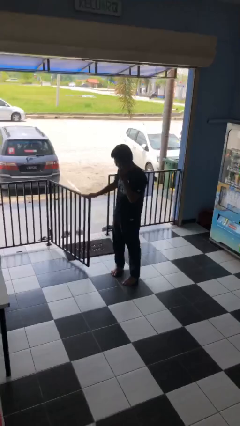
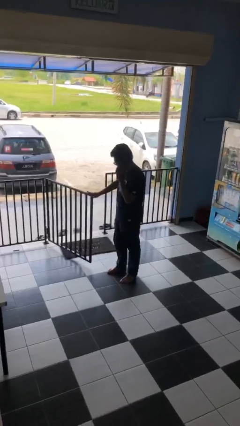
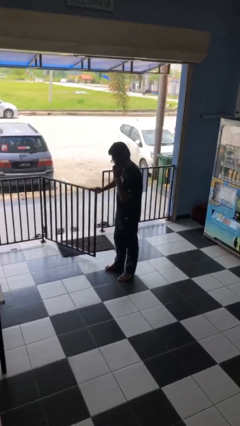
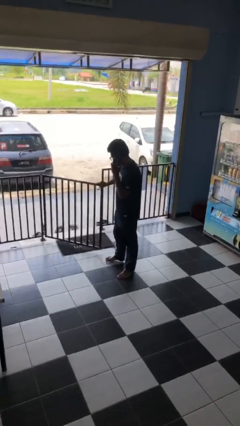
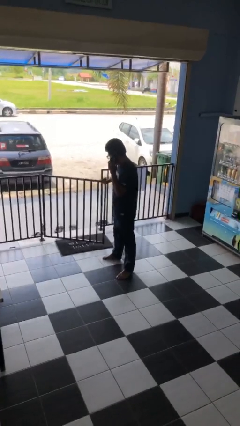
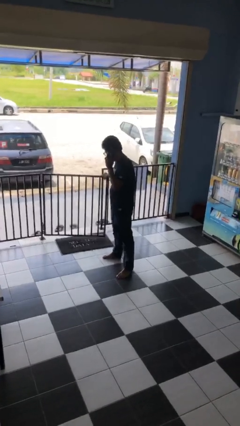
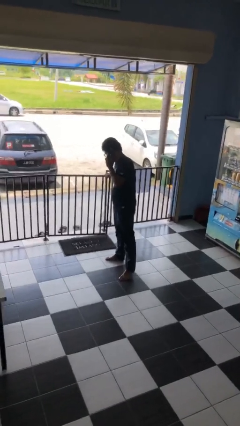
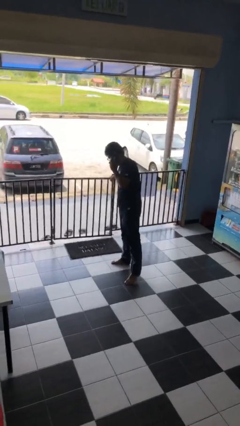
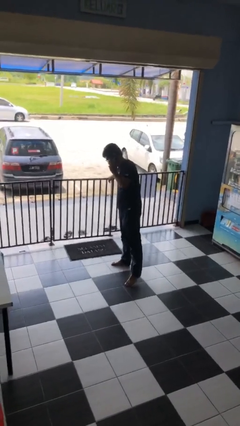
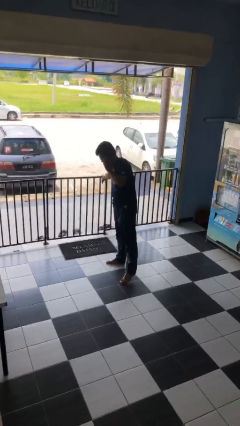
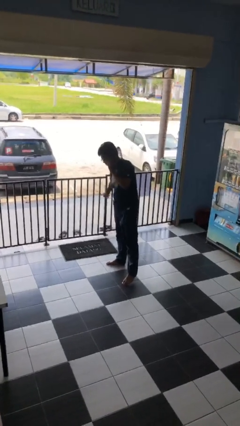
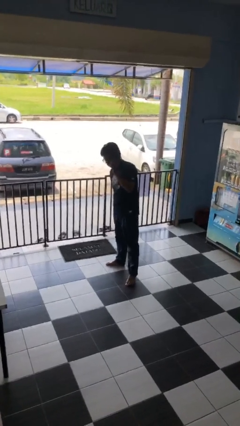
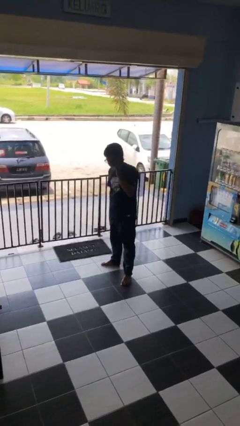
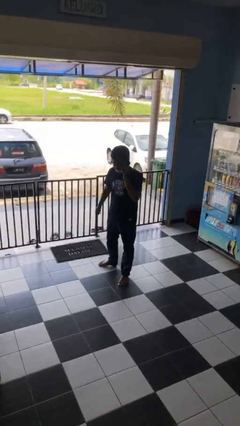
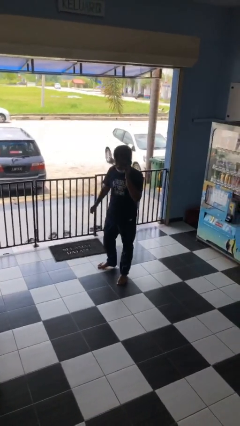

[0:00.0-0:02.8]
person closes facility door

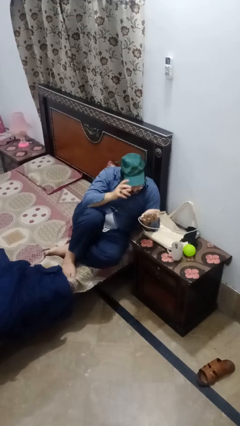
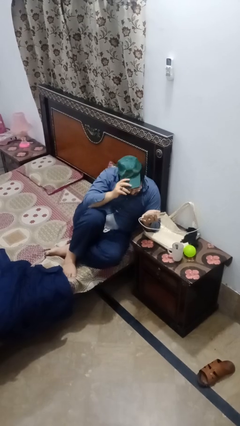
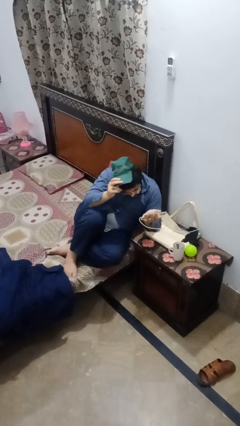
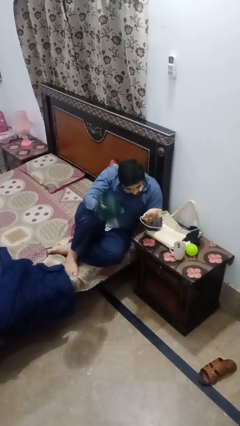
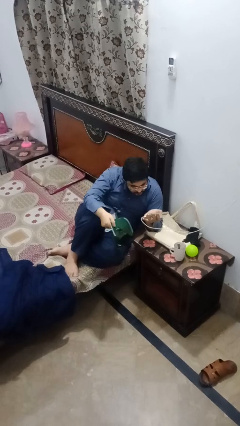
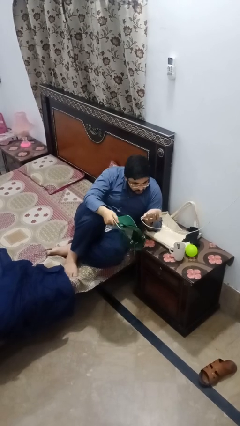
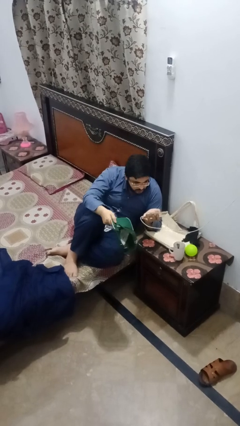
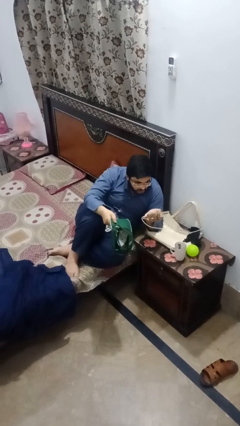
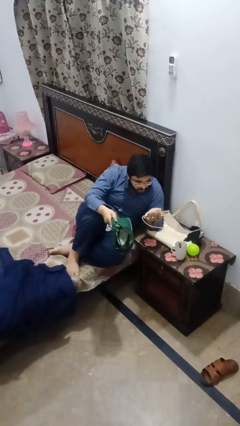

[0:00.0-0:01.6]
person takes off hat

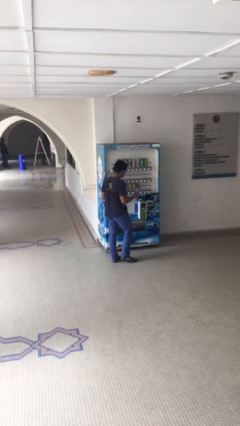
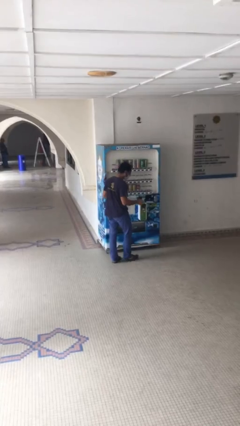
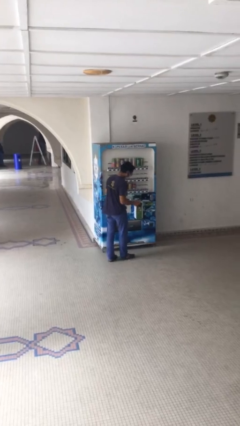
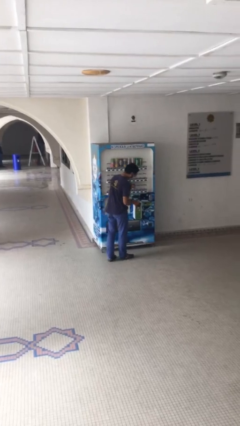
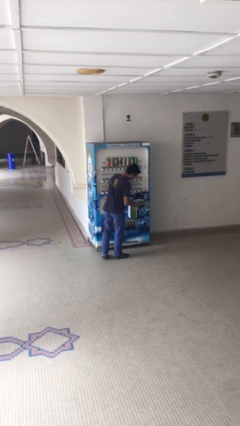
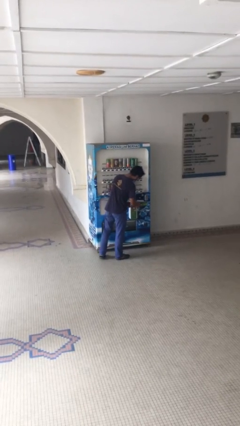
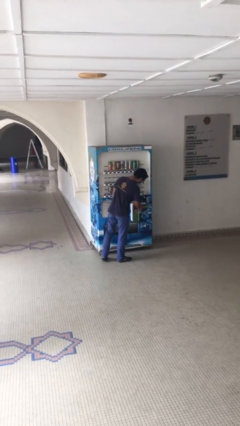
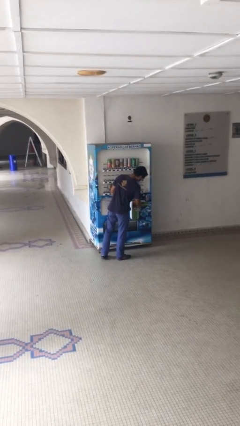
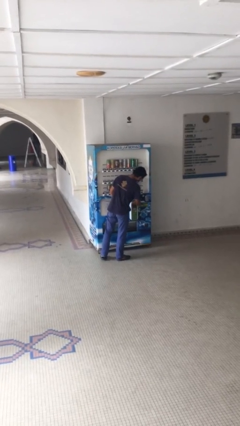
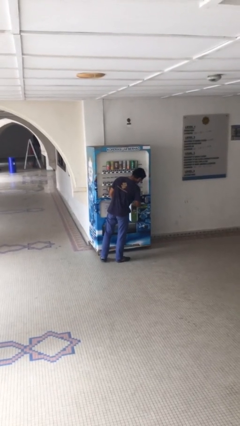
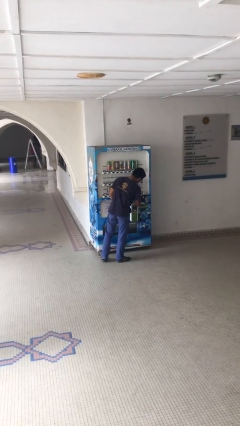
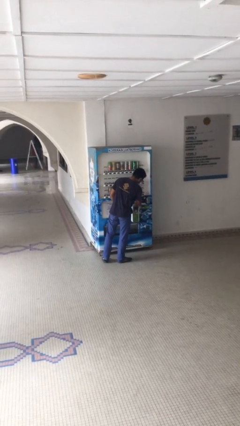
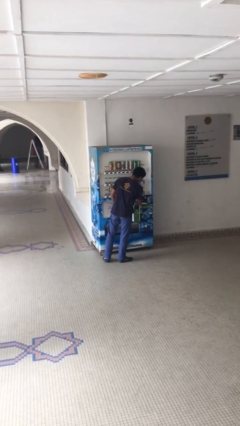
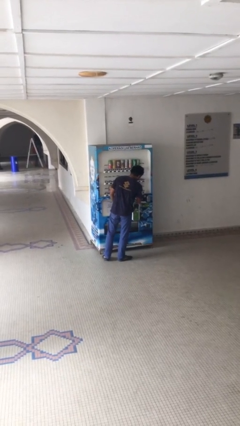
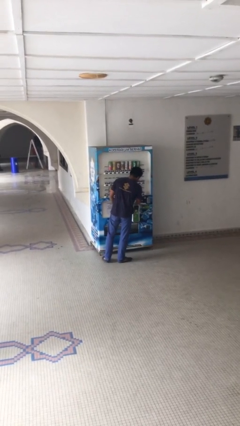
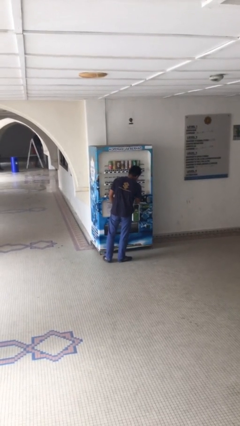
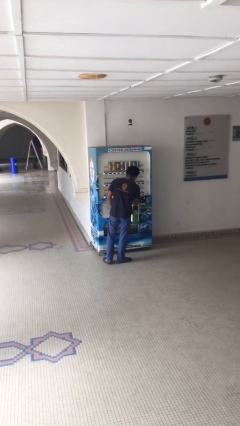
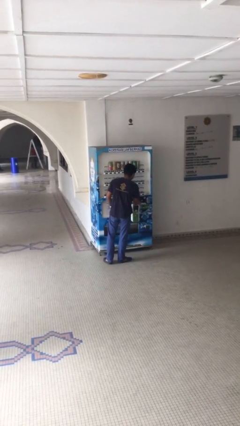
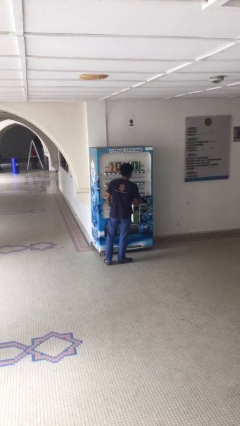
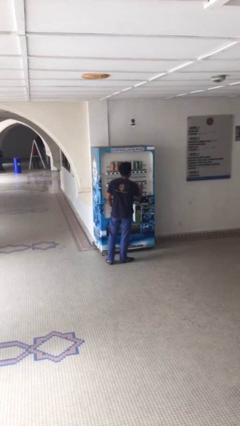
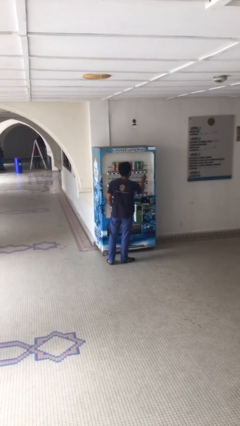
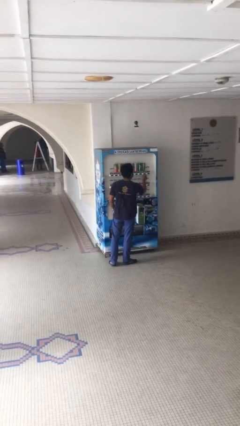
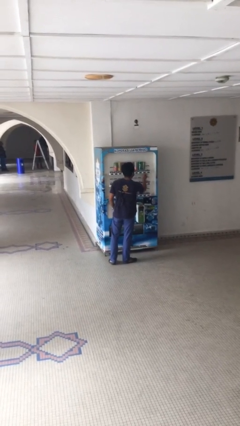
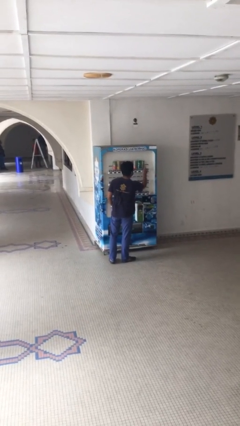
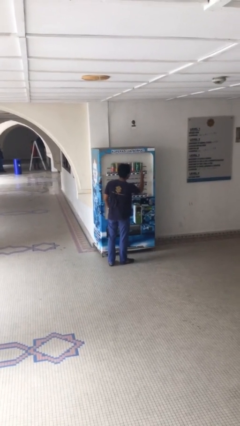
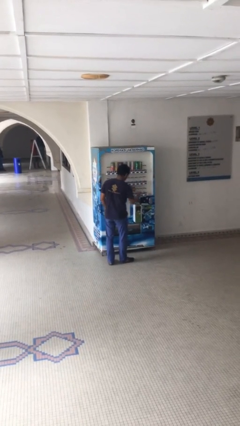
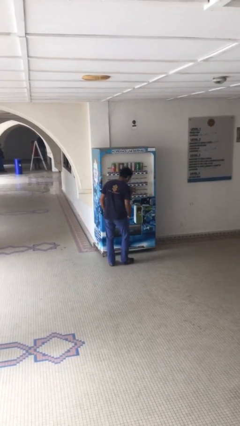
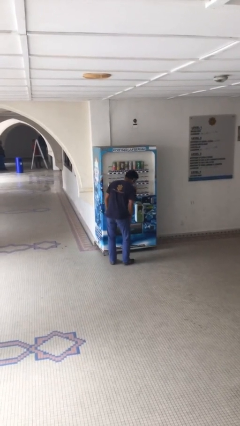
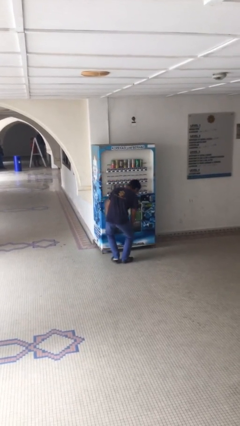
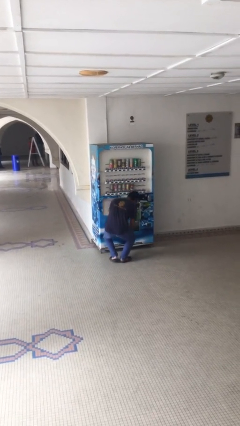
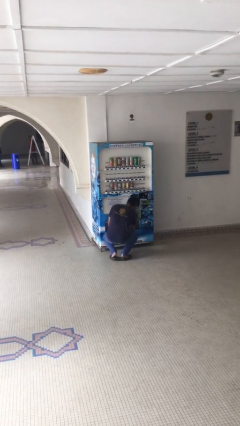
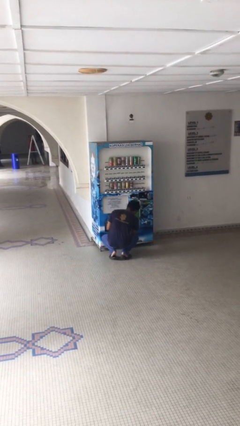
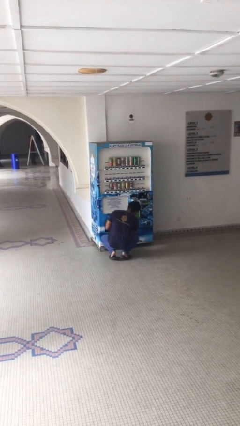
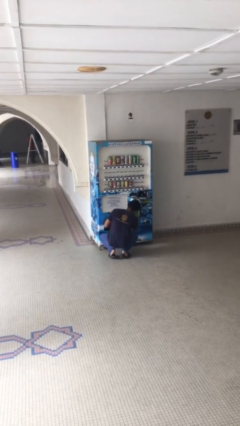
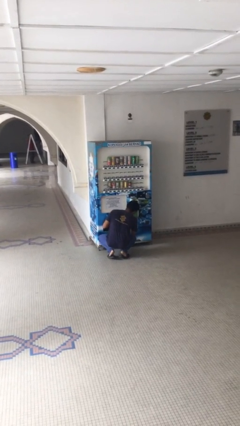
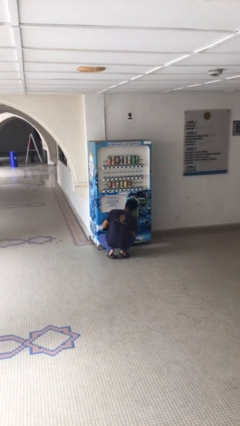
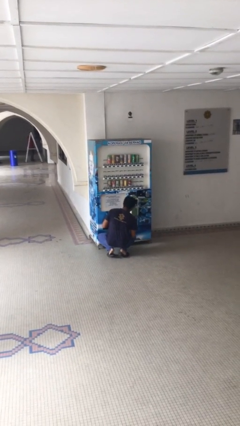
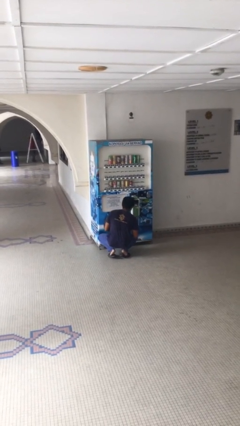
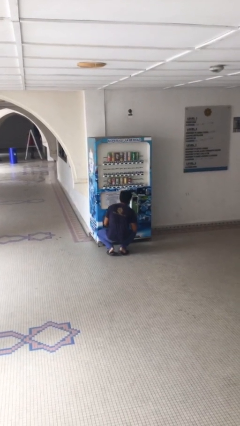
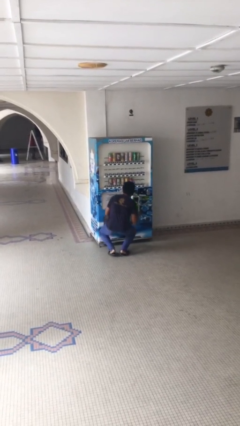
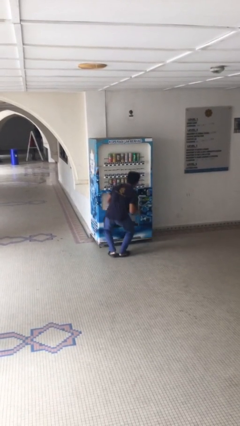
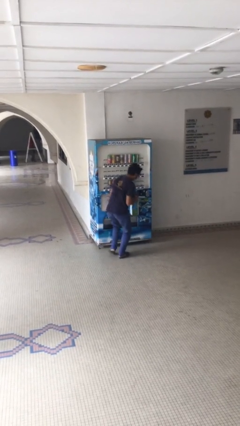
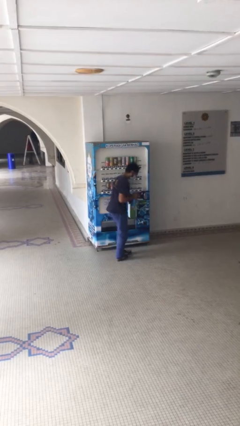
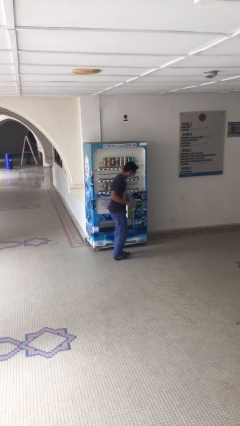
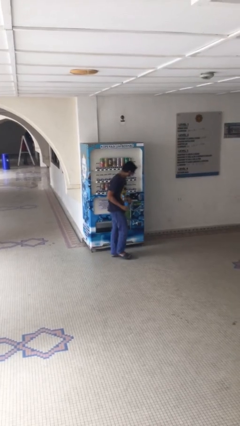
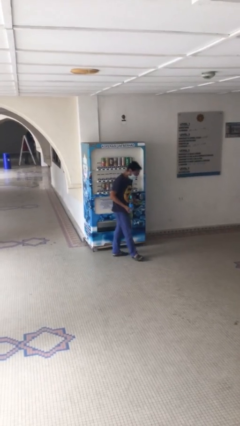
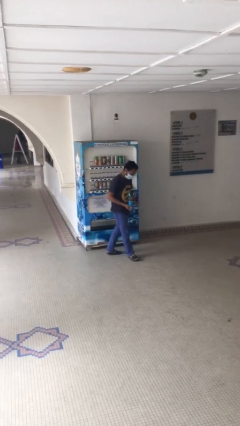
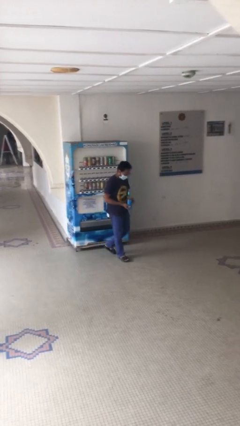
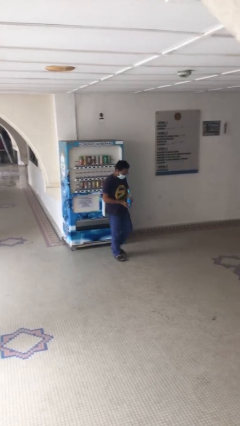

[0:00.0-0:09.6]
person purchases from machine

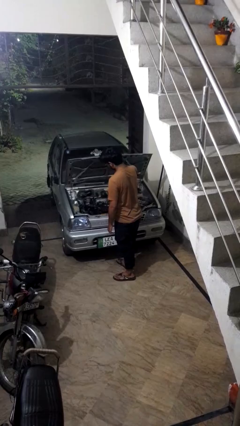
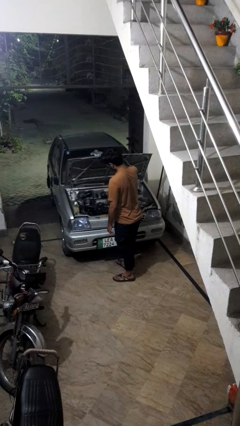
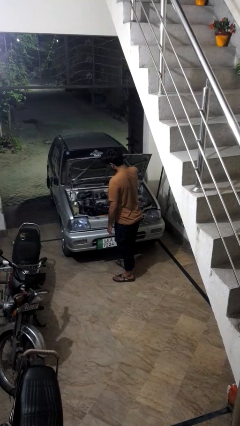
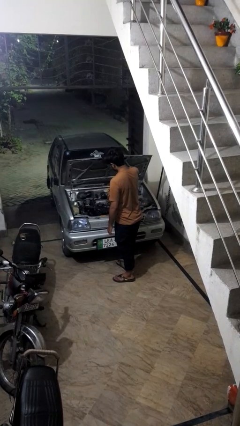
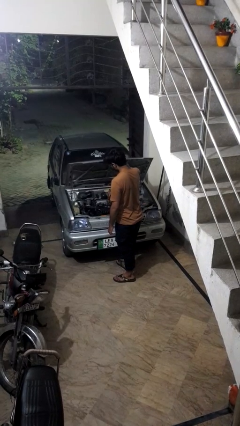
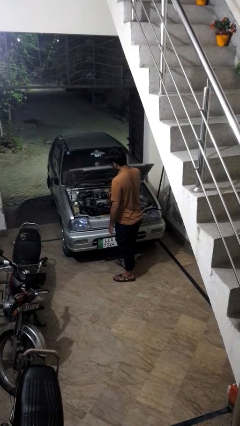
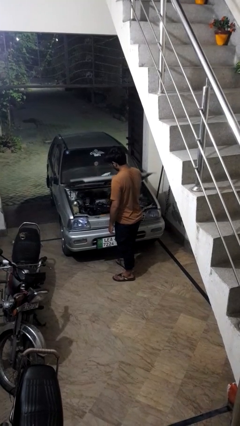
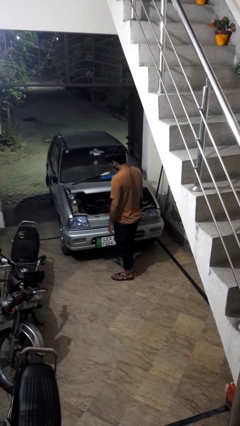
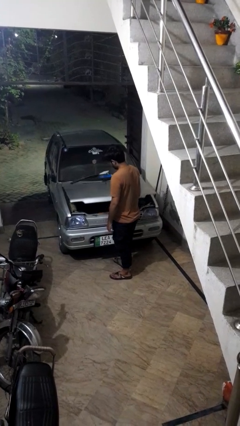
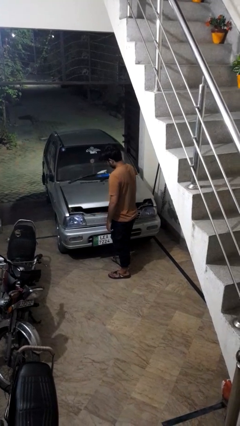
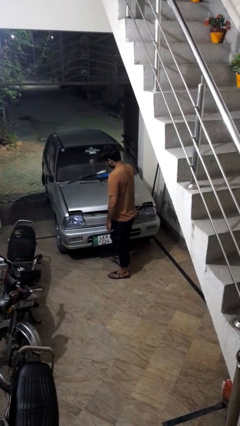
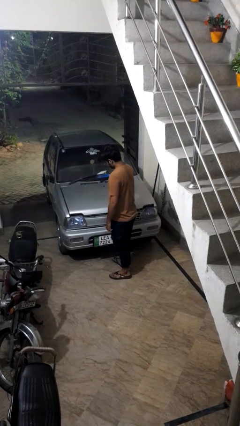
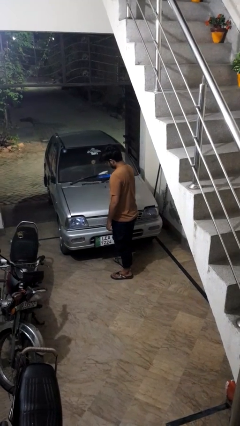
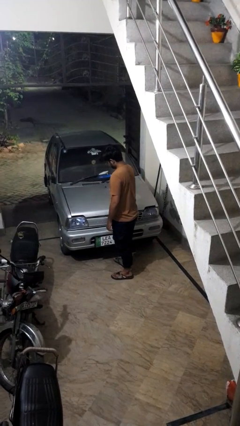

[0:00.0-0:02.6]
person closes car hood

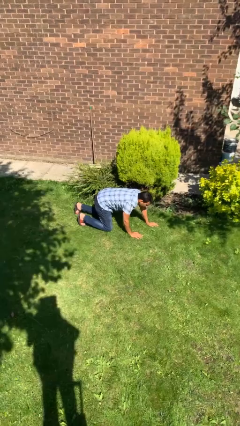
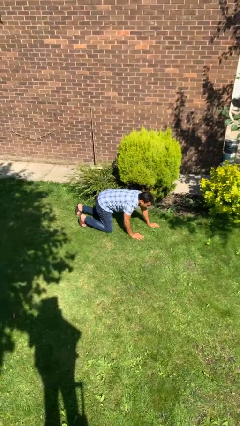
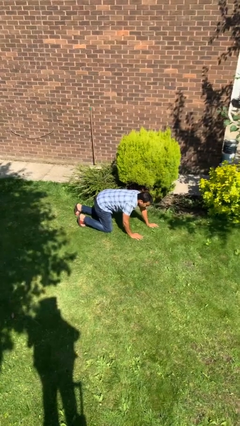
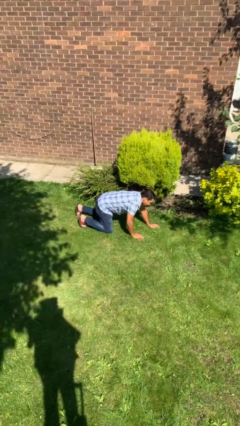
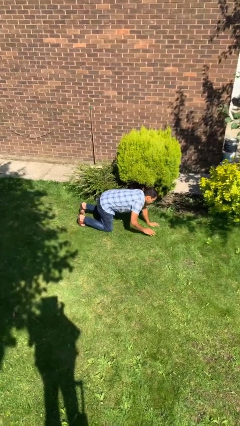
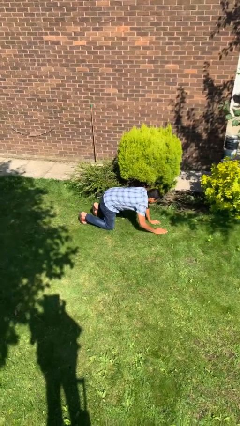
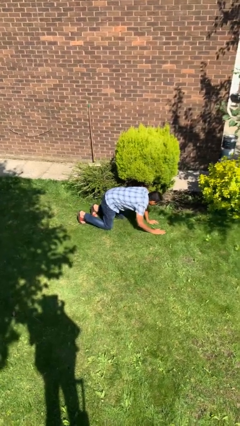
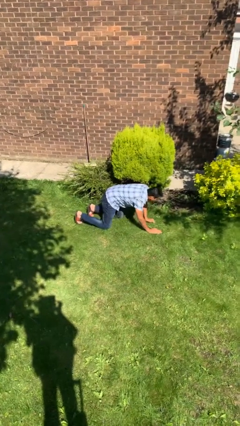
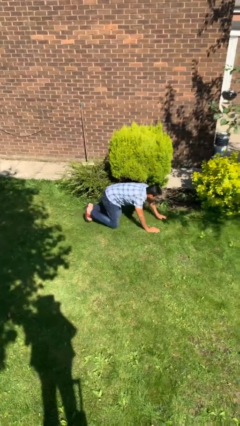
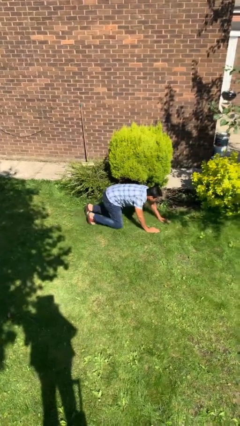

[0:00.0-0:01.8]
person crawls
